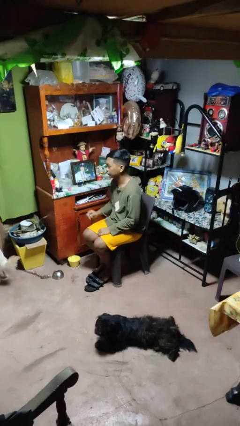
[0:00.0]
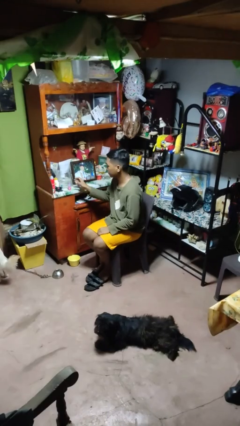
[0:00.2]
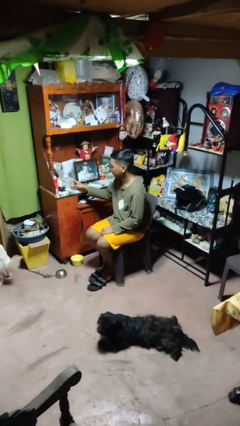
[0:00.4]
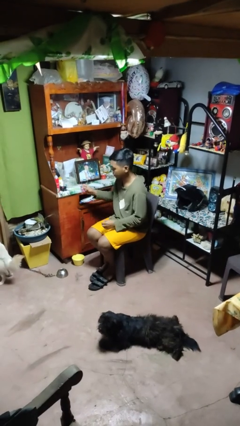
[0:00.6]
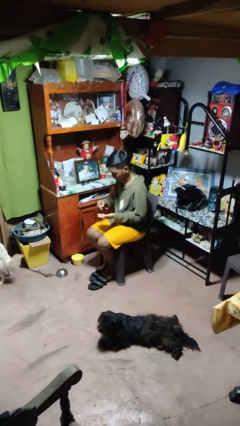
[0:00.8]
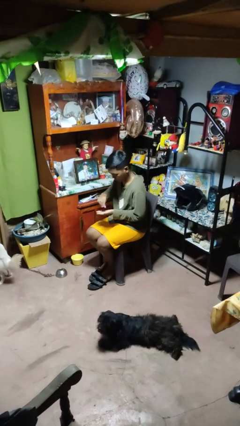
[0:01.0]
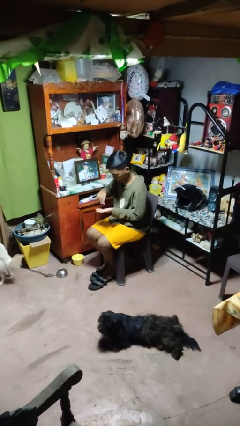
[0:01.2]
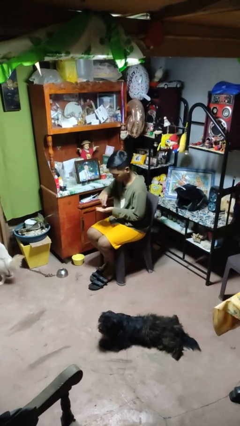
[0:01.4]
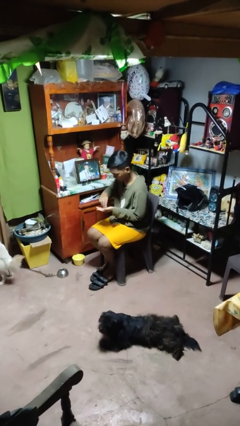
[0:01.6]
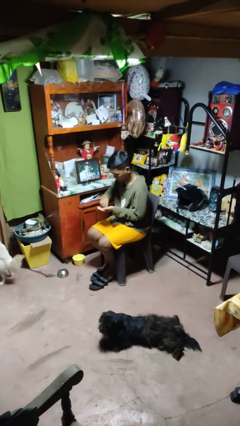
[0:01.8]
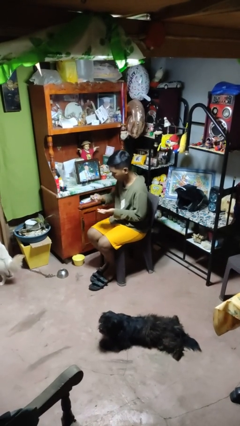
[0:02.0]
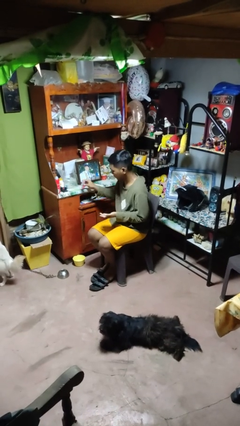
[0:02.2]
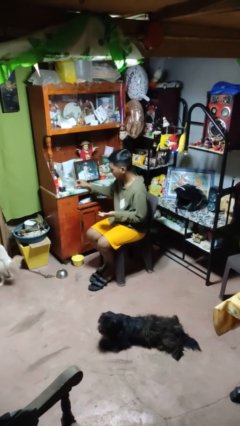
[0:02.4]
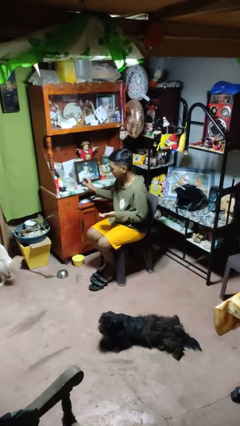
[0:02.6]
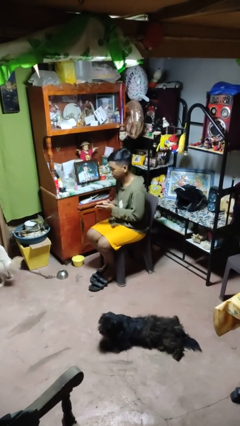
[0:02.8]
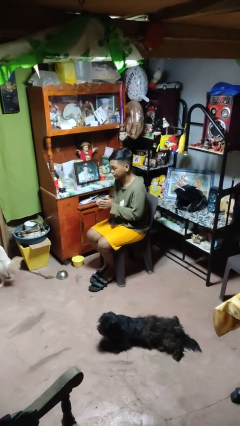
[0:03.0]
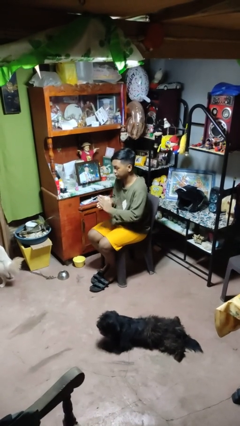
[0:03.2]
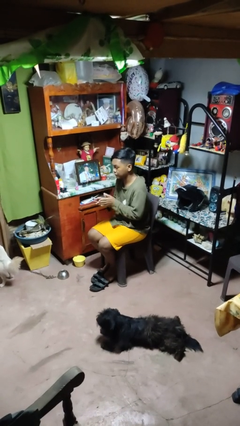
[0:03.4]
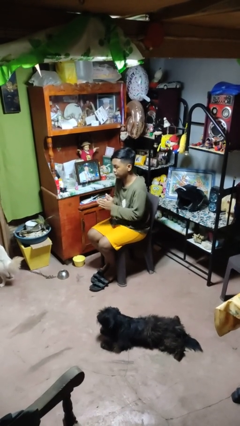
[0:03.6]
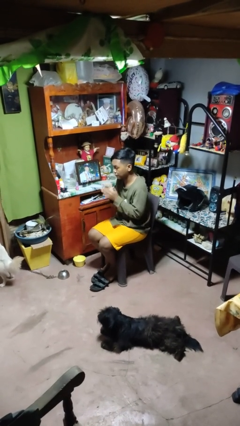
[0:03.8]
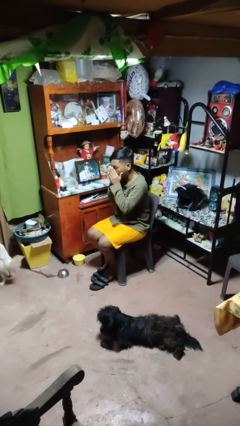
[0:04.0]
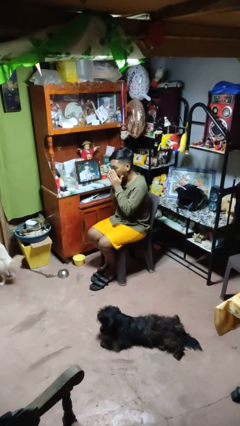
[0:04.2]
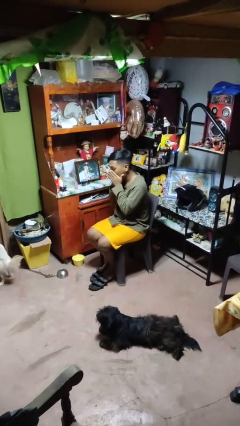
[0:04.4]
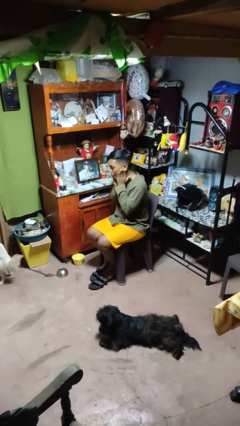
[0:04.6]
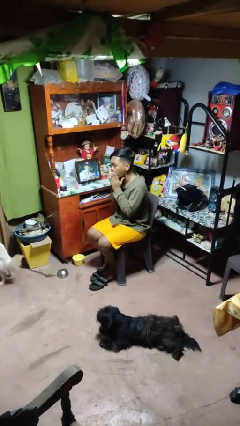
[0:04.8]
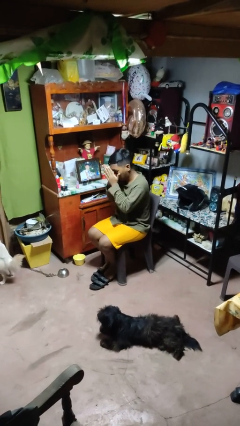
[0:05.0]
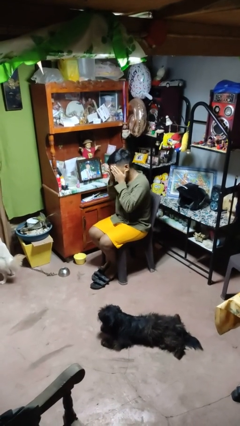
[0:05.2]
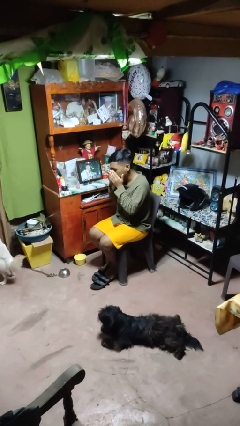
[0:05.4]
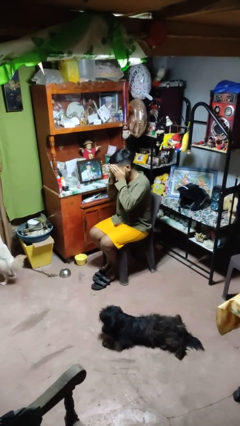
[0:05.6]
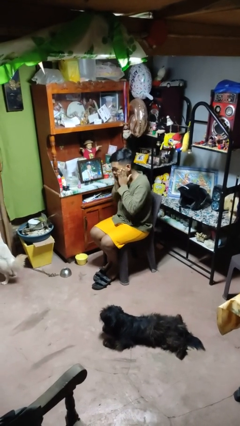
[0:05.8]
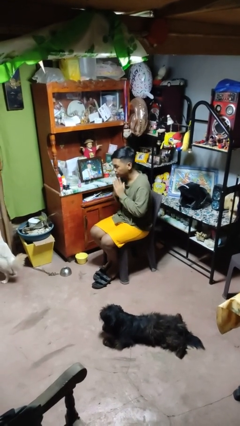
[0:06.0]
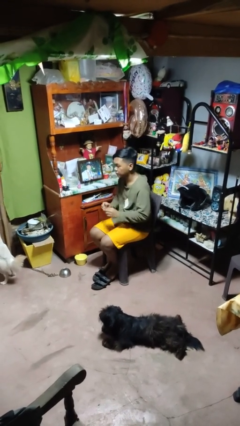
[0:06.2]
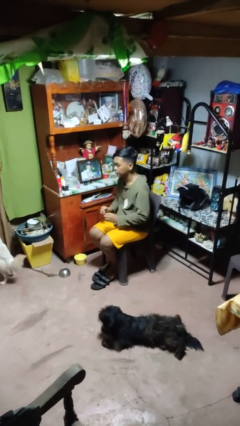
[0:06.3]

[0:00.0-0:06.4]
person applies facial moisturizer

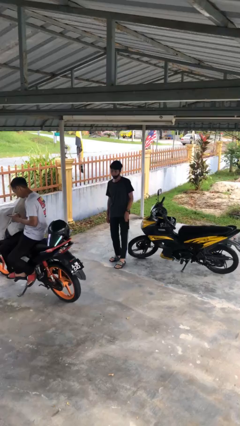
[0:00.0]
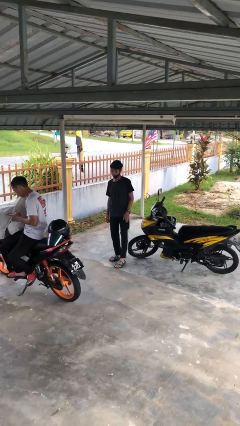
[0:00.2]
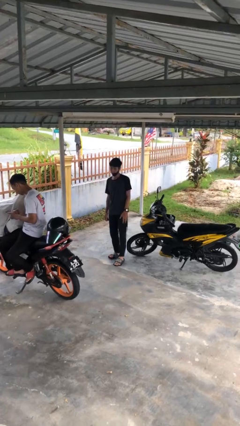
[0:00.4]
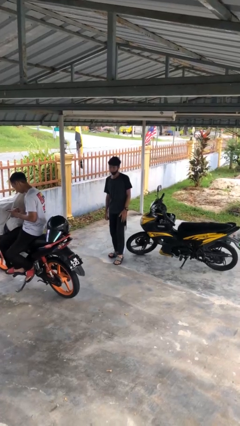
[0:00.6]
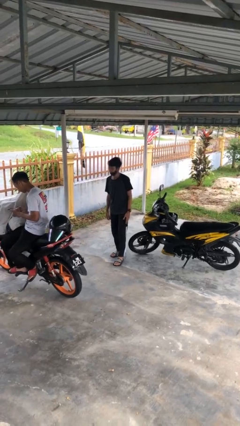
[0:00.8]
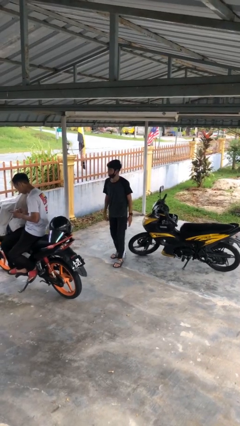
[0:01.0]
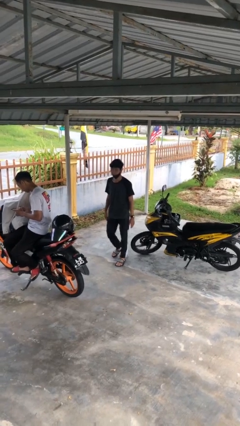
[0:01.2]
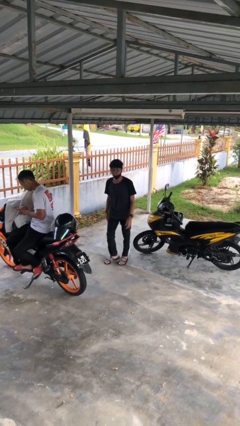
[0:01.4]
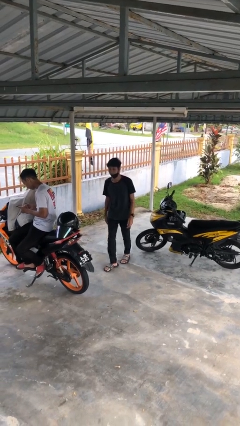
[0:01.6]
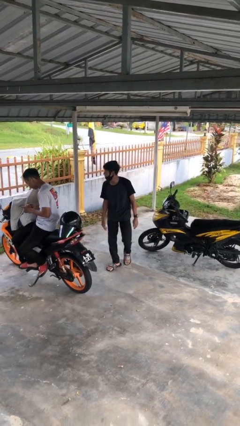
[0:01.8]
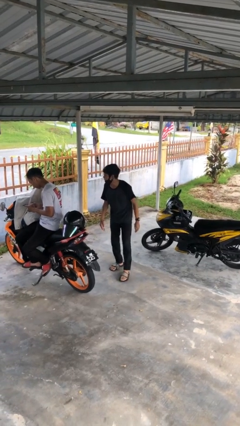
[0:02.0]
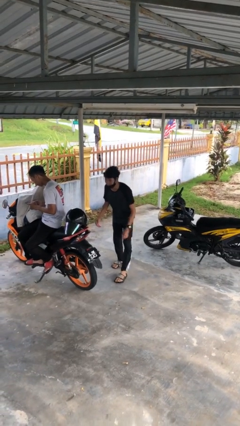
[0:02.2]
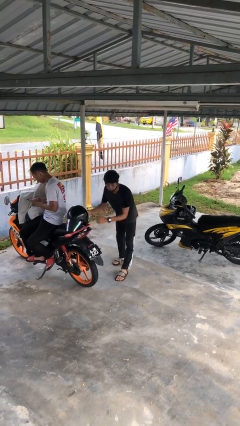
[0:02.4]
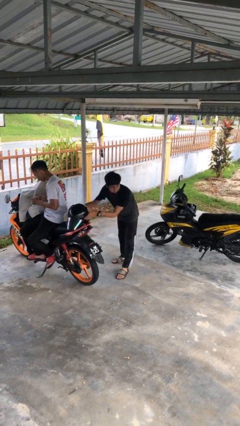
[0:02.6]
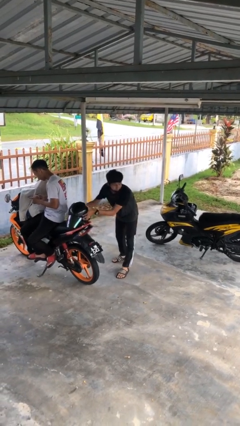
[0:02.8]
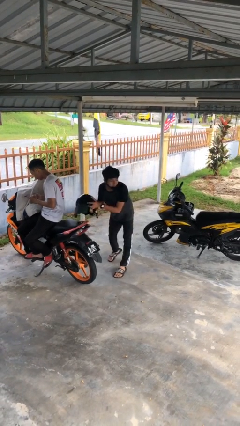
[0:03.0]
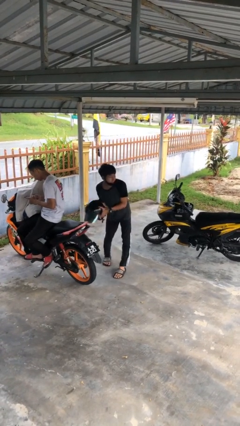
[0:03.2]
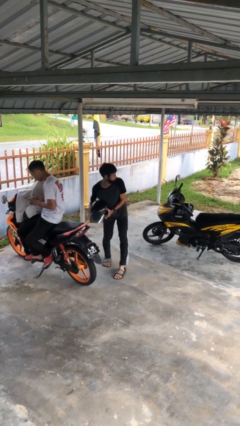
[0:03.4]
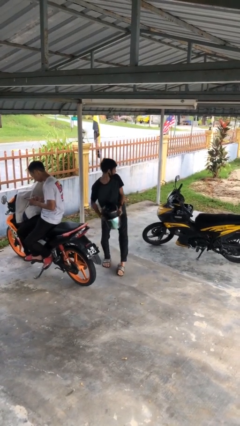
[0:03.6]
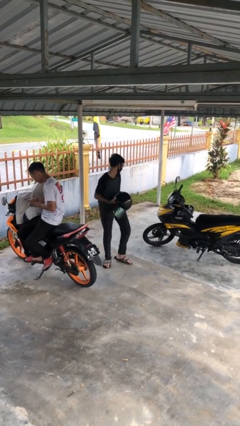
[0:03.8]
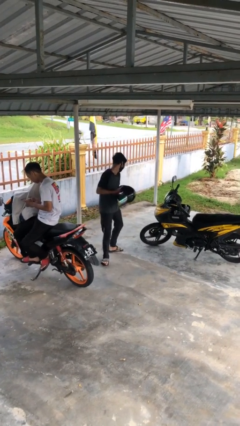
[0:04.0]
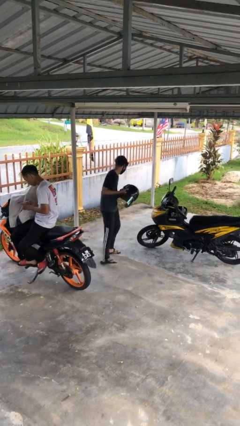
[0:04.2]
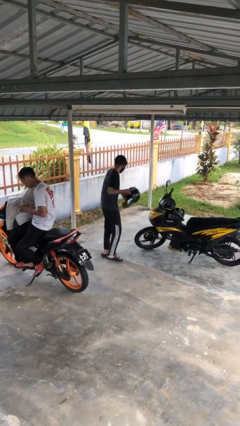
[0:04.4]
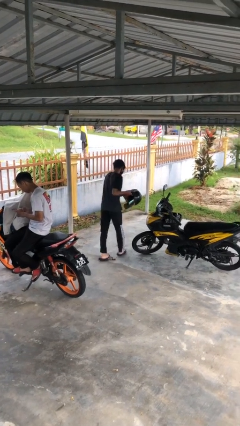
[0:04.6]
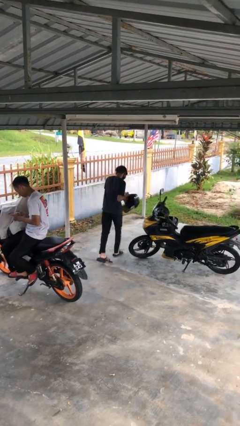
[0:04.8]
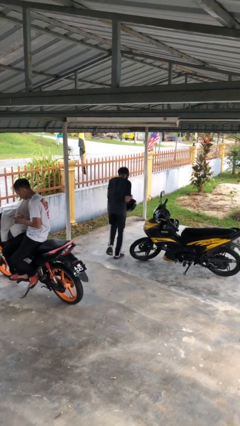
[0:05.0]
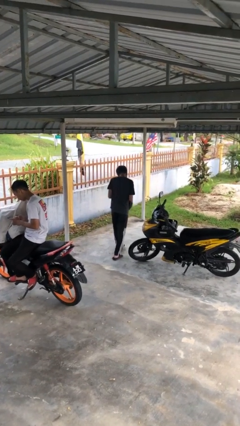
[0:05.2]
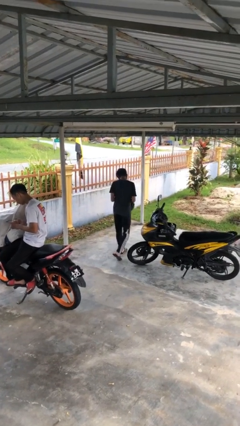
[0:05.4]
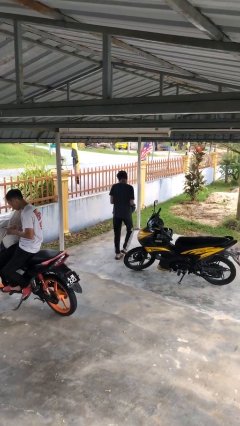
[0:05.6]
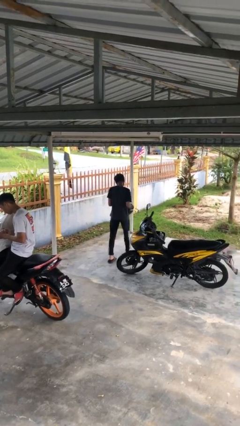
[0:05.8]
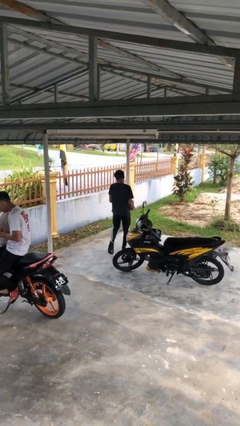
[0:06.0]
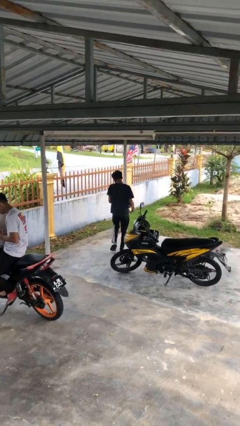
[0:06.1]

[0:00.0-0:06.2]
person steals object from person

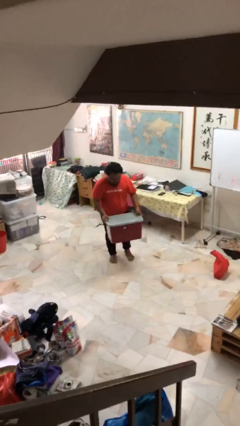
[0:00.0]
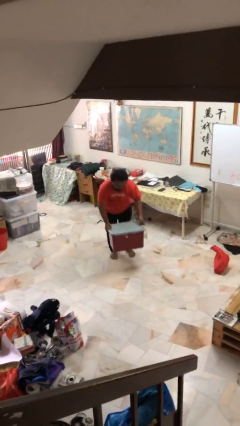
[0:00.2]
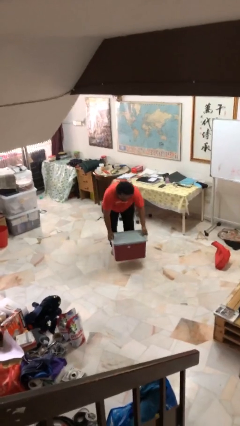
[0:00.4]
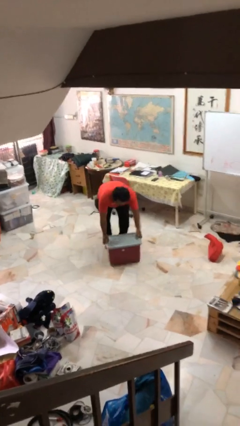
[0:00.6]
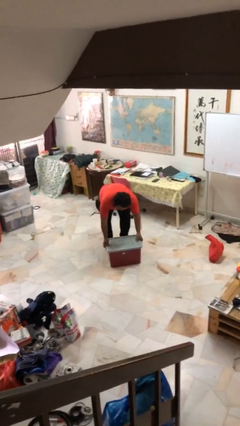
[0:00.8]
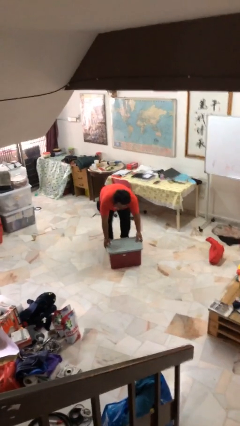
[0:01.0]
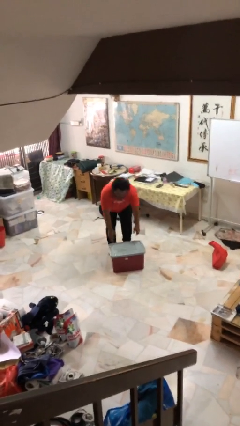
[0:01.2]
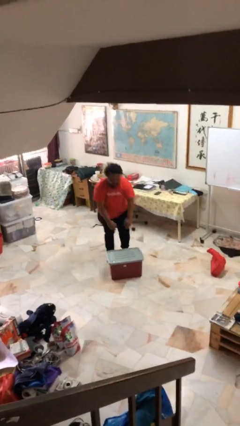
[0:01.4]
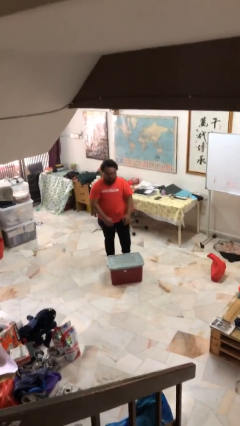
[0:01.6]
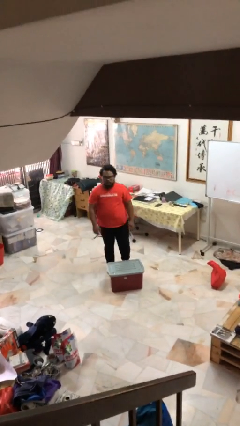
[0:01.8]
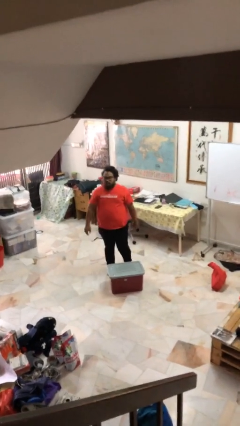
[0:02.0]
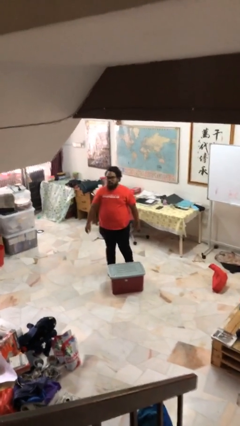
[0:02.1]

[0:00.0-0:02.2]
person puts down object on floor

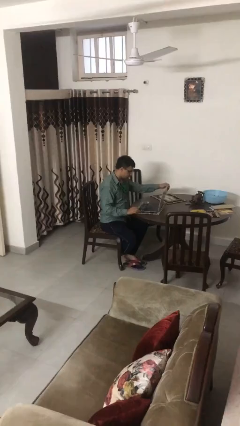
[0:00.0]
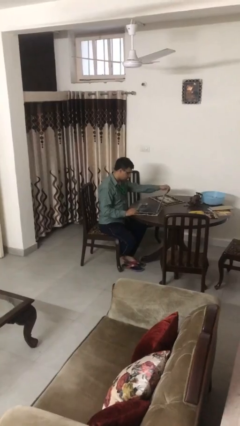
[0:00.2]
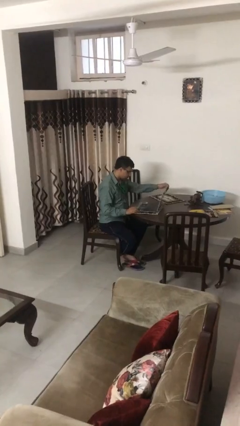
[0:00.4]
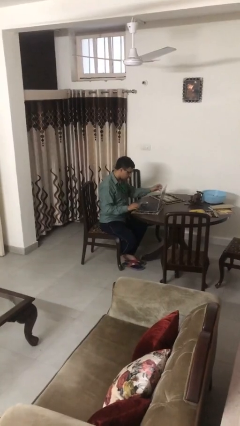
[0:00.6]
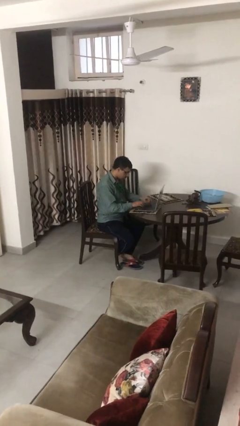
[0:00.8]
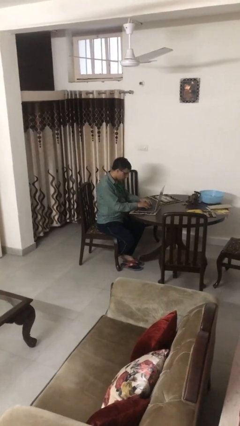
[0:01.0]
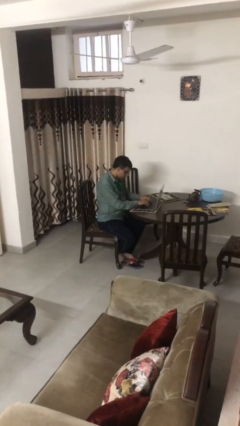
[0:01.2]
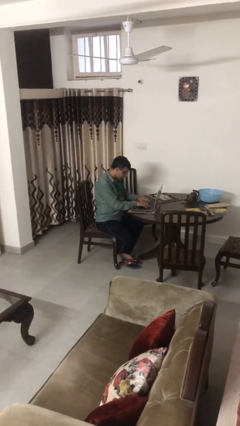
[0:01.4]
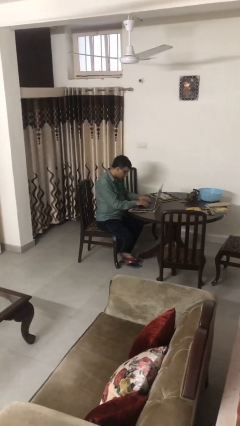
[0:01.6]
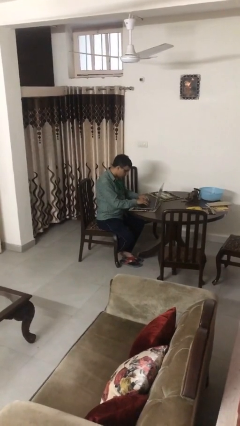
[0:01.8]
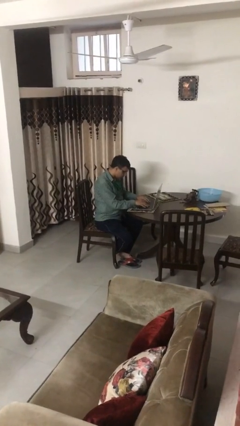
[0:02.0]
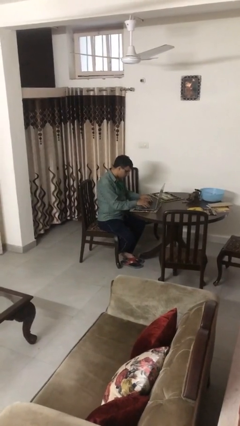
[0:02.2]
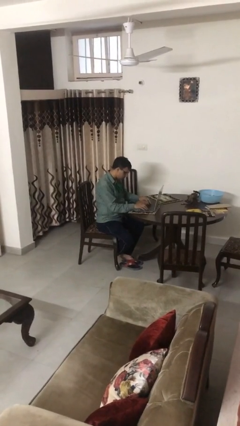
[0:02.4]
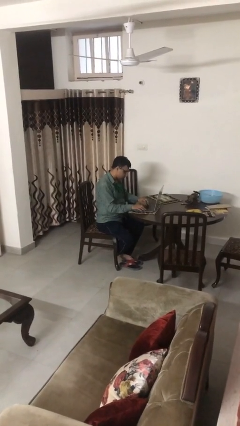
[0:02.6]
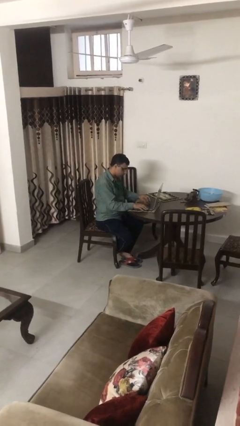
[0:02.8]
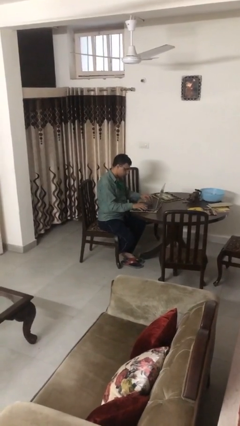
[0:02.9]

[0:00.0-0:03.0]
person interacts with laptop
